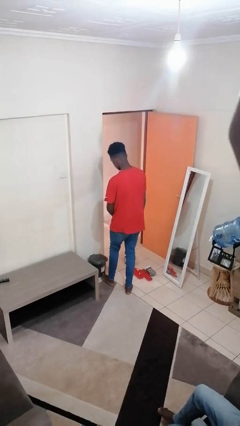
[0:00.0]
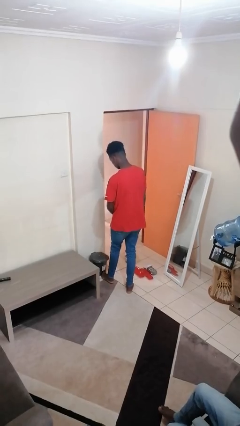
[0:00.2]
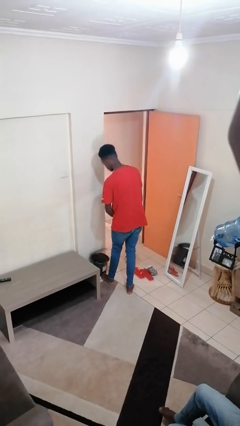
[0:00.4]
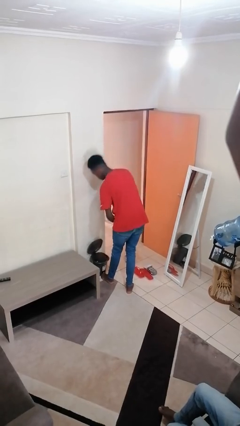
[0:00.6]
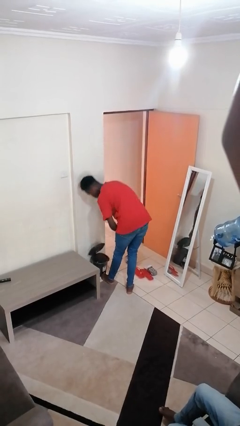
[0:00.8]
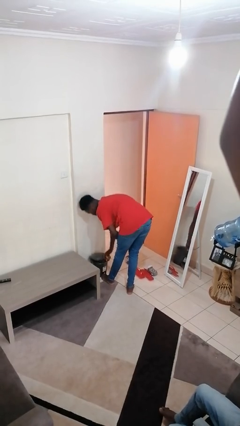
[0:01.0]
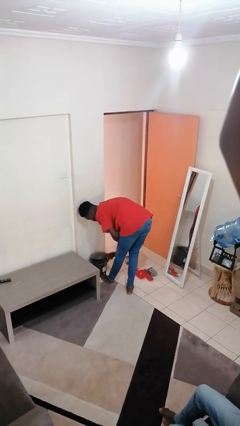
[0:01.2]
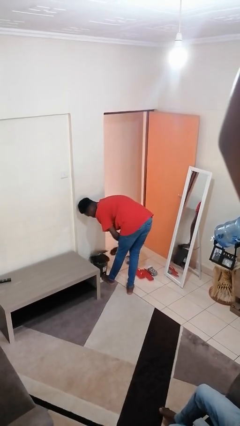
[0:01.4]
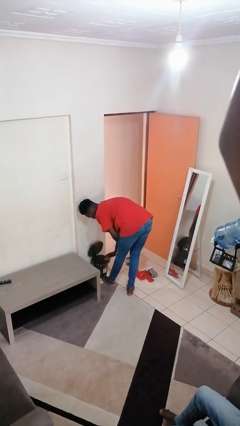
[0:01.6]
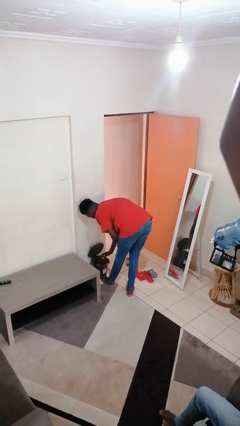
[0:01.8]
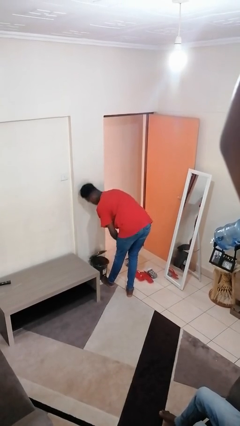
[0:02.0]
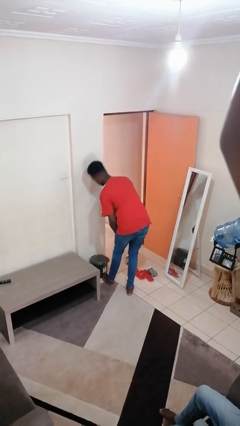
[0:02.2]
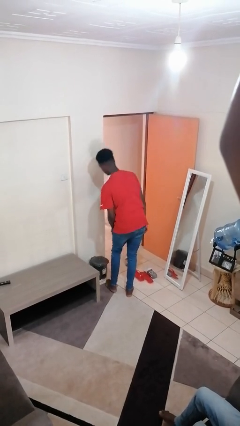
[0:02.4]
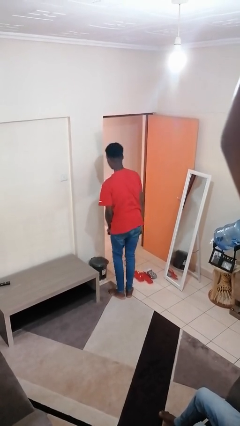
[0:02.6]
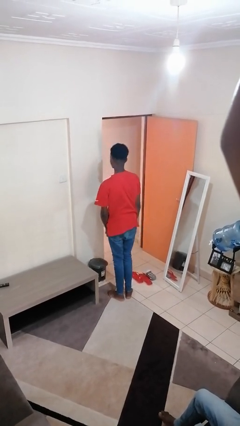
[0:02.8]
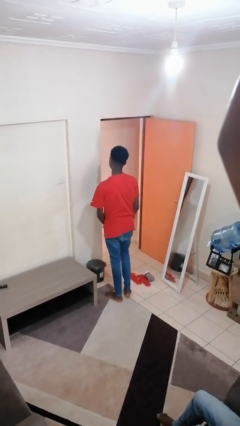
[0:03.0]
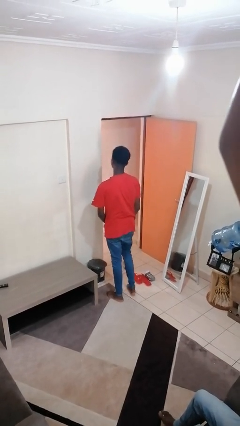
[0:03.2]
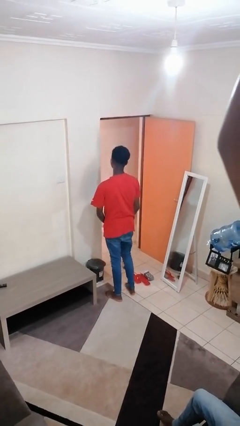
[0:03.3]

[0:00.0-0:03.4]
person discards trash

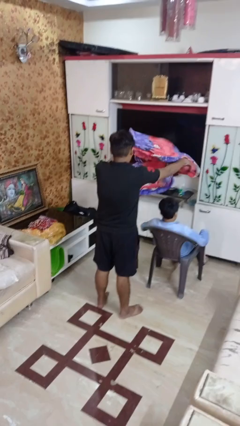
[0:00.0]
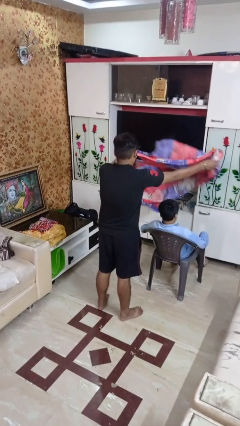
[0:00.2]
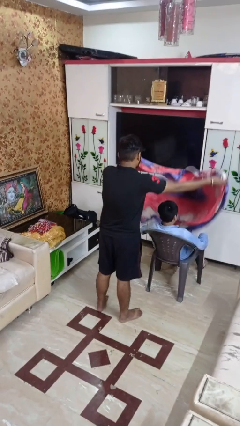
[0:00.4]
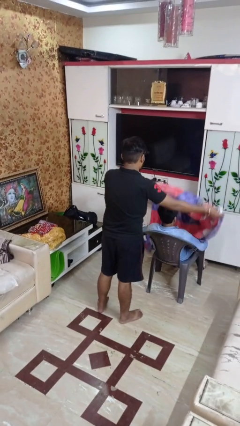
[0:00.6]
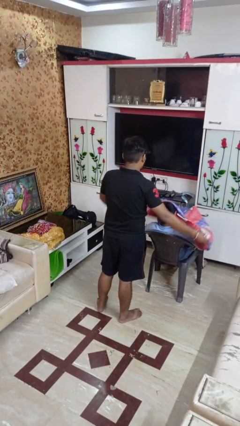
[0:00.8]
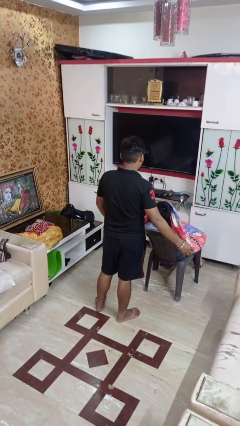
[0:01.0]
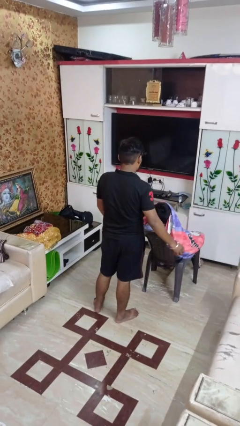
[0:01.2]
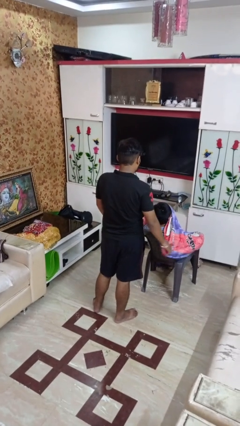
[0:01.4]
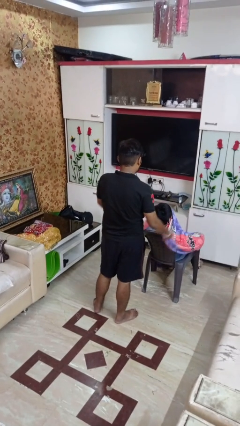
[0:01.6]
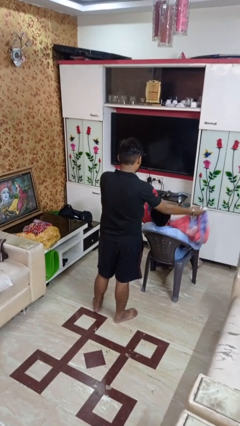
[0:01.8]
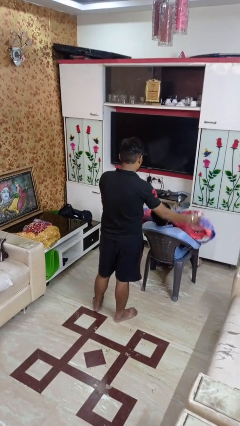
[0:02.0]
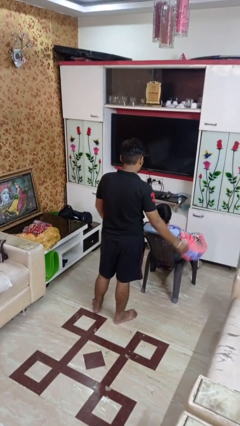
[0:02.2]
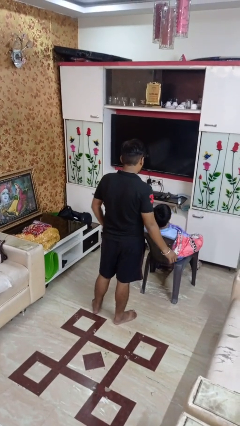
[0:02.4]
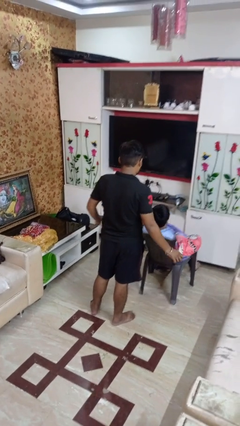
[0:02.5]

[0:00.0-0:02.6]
person covers friend with blanket

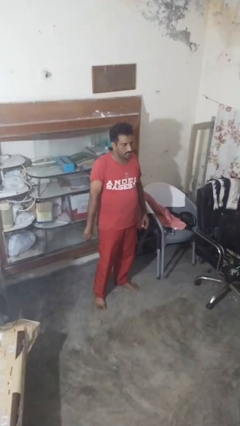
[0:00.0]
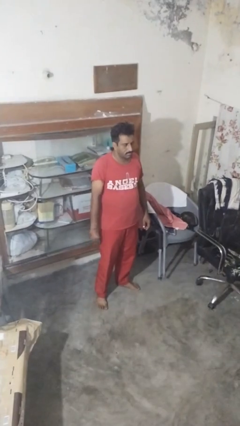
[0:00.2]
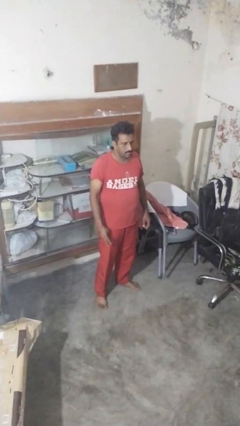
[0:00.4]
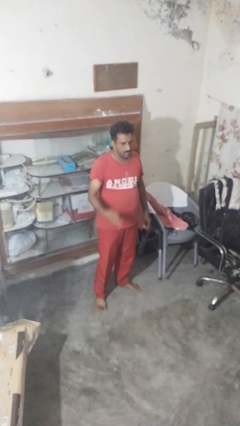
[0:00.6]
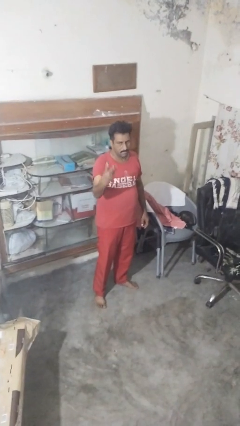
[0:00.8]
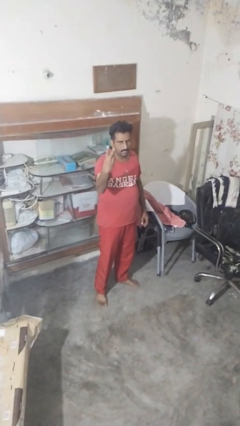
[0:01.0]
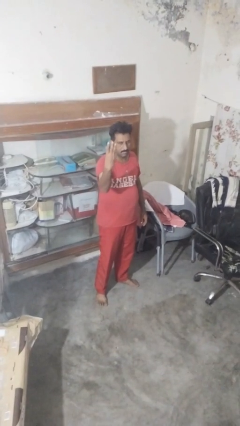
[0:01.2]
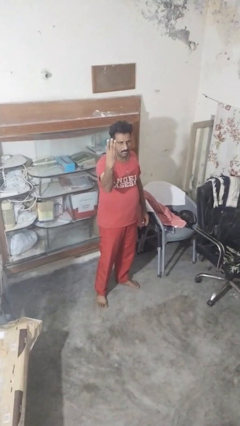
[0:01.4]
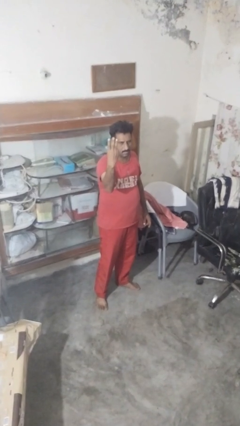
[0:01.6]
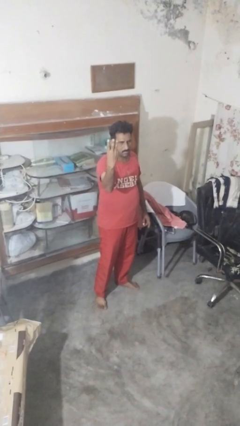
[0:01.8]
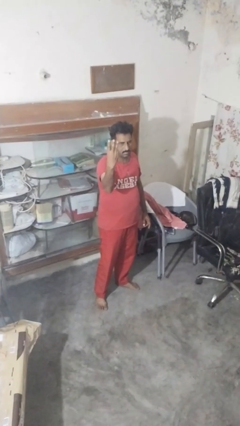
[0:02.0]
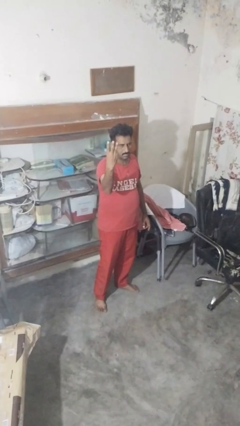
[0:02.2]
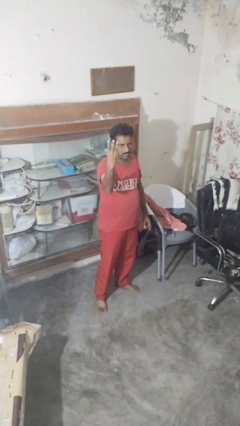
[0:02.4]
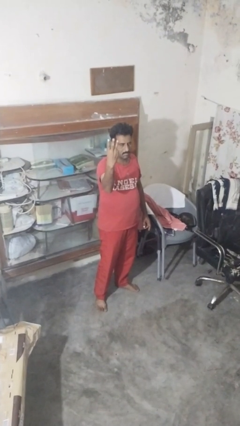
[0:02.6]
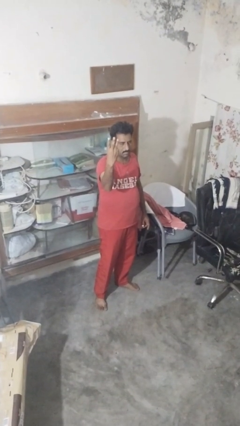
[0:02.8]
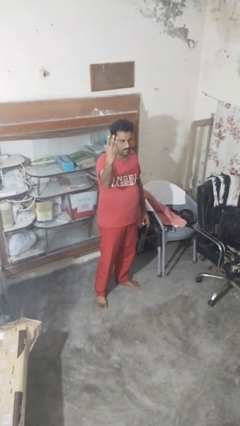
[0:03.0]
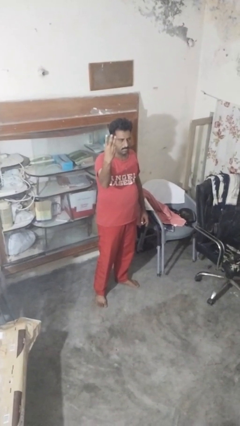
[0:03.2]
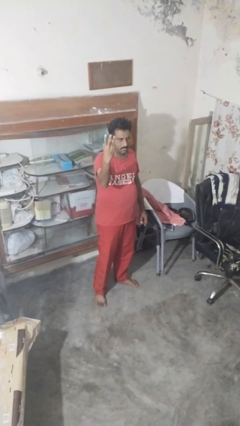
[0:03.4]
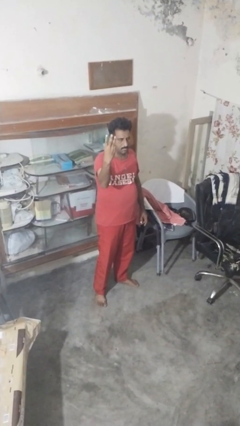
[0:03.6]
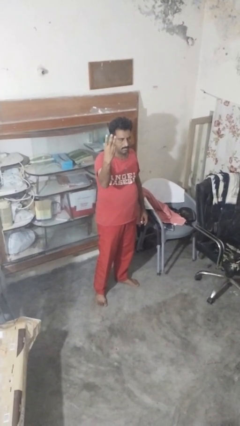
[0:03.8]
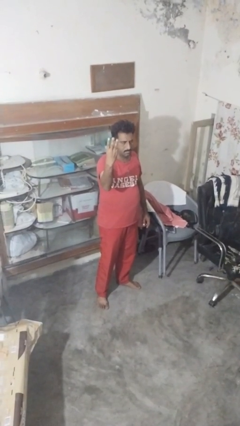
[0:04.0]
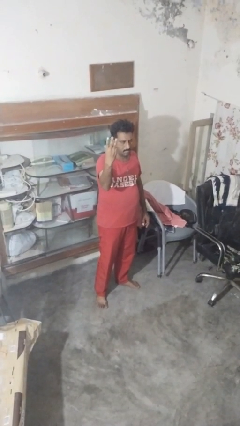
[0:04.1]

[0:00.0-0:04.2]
person gestures number three

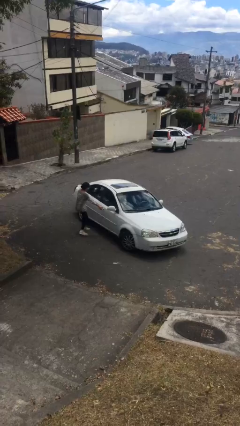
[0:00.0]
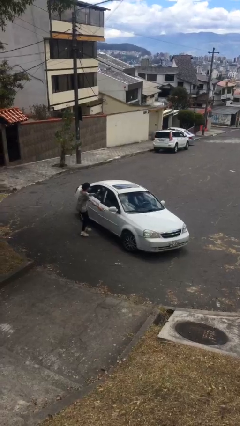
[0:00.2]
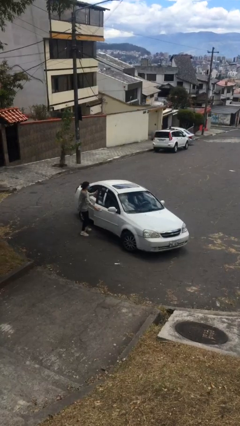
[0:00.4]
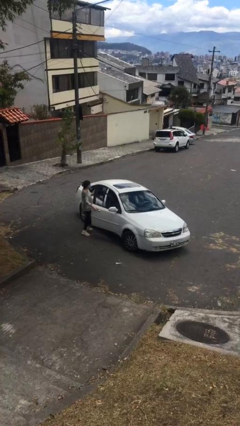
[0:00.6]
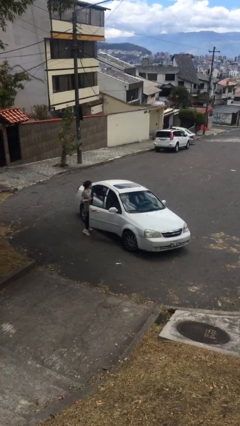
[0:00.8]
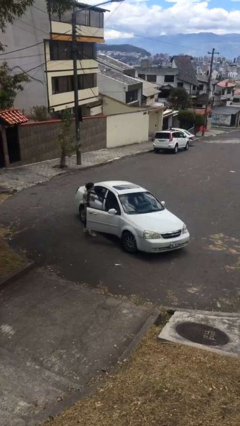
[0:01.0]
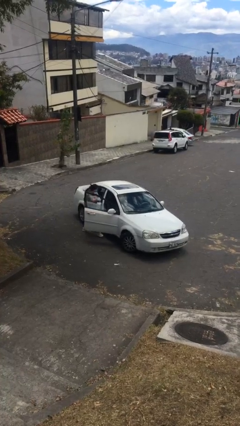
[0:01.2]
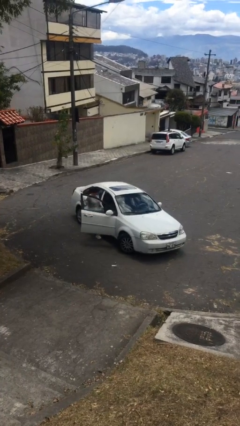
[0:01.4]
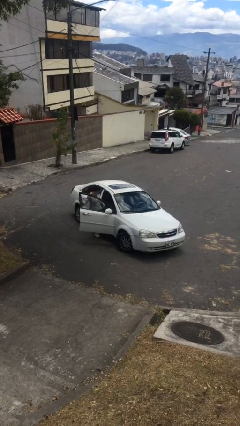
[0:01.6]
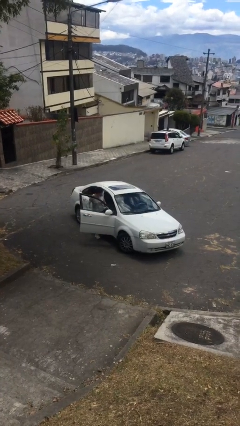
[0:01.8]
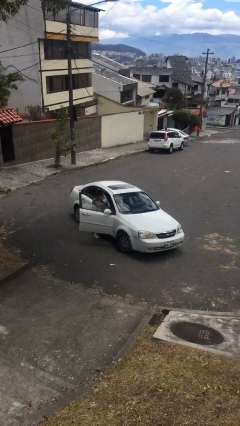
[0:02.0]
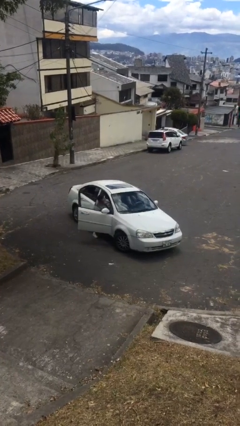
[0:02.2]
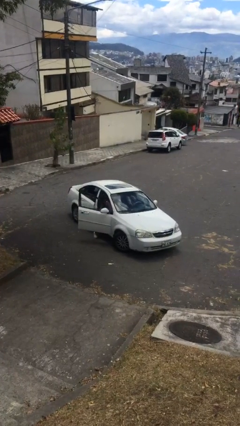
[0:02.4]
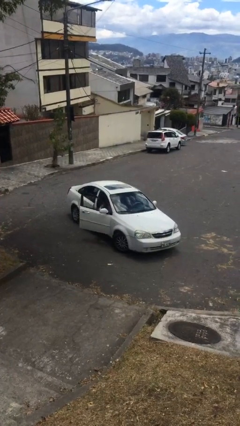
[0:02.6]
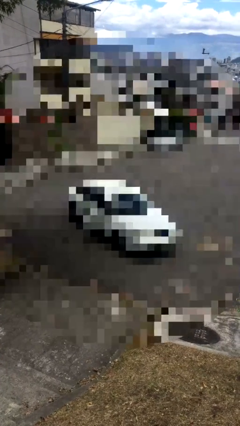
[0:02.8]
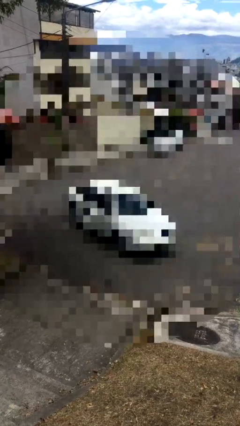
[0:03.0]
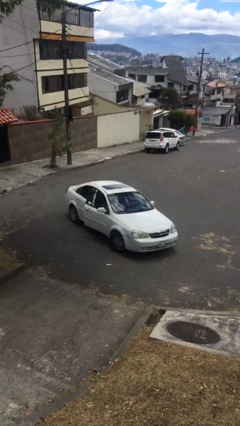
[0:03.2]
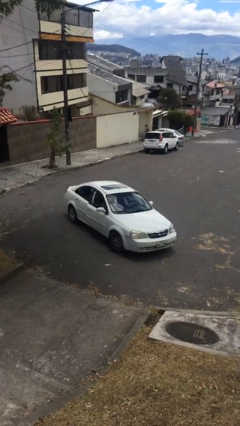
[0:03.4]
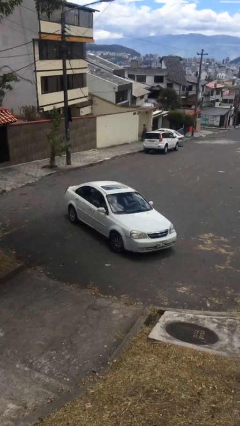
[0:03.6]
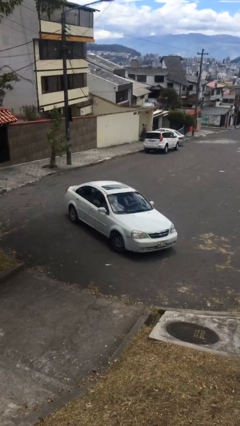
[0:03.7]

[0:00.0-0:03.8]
car picks up person

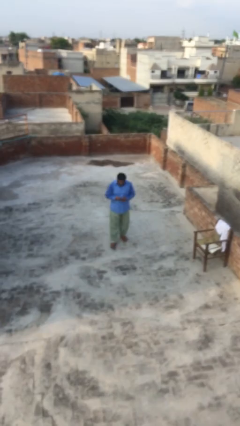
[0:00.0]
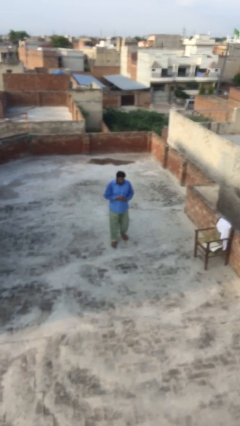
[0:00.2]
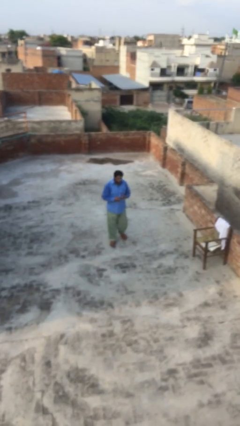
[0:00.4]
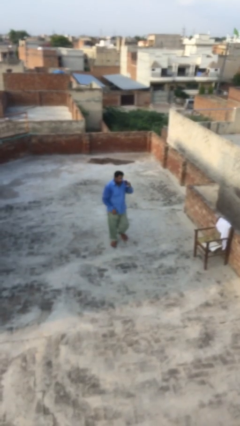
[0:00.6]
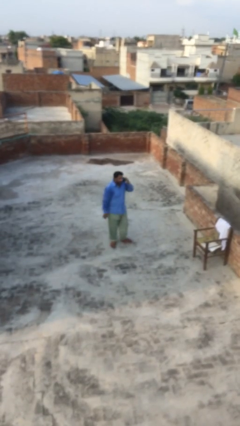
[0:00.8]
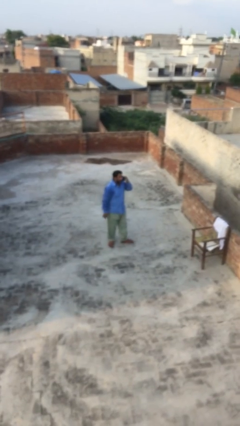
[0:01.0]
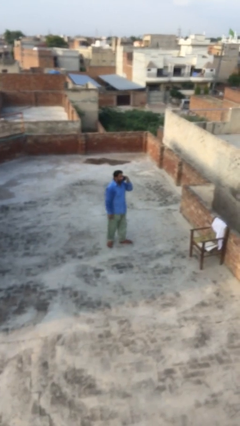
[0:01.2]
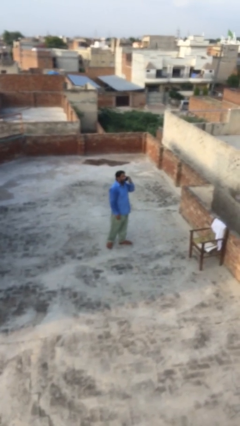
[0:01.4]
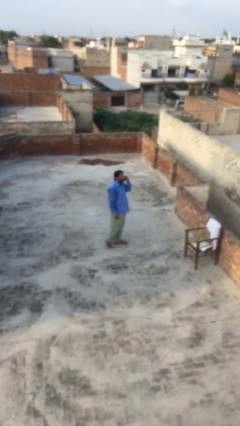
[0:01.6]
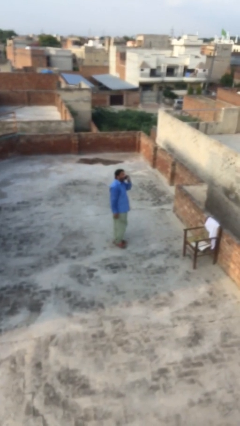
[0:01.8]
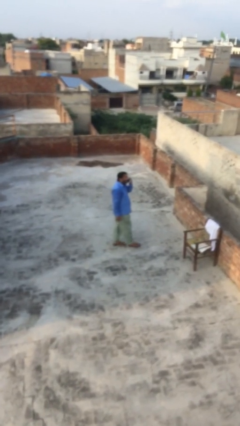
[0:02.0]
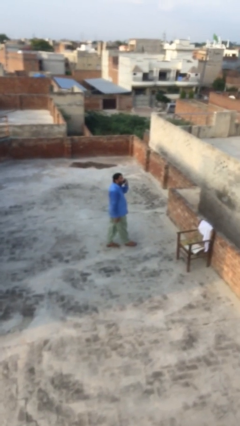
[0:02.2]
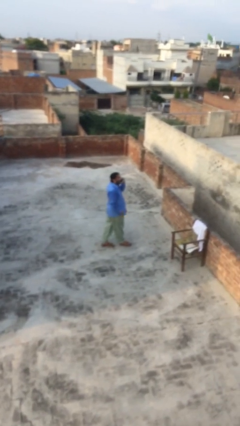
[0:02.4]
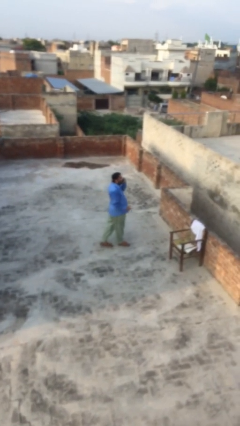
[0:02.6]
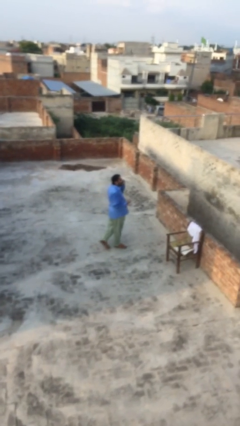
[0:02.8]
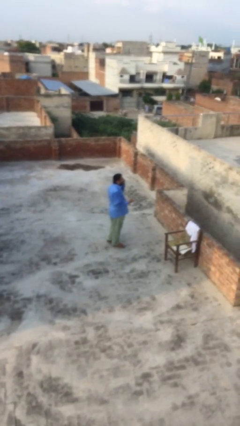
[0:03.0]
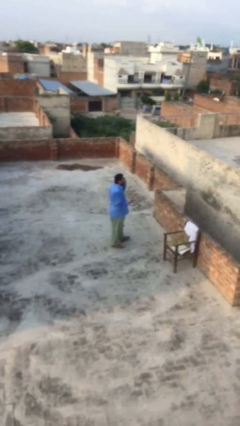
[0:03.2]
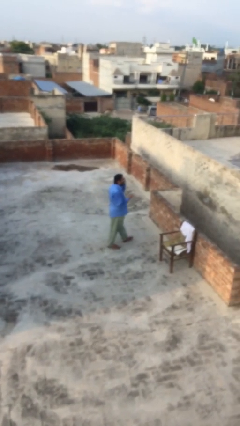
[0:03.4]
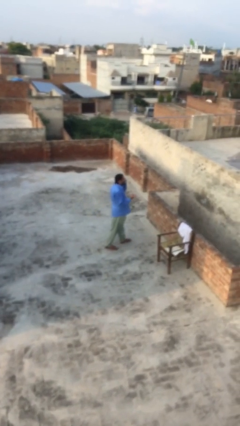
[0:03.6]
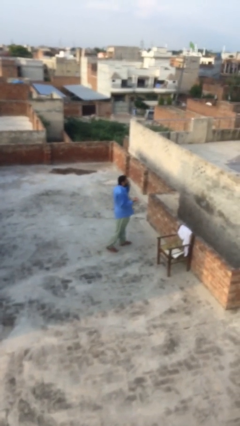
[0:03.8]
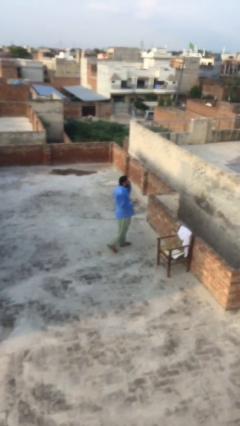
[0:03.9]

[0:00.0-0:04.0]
person talks on phone
